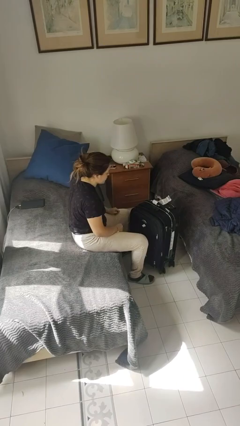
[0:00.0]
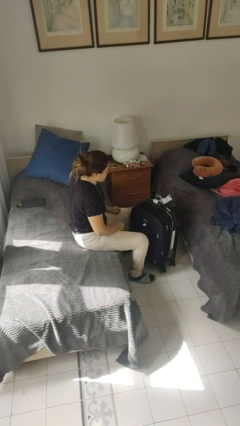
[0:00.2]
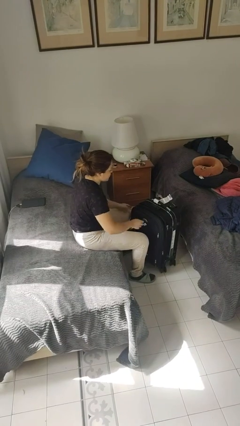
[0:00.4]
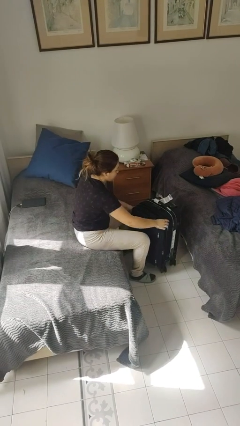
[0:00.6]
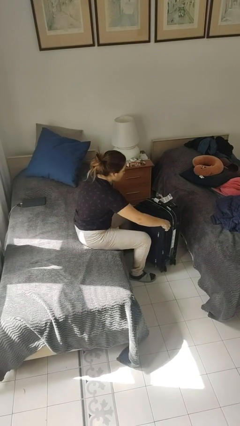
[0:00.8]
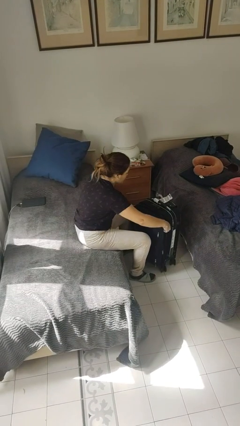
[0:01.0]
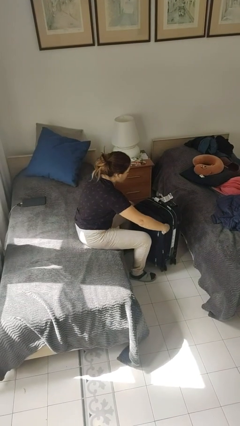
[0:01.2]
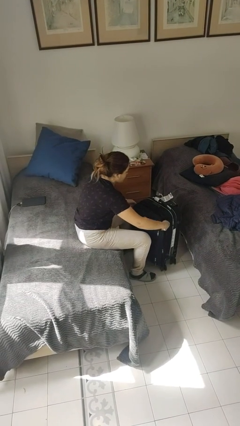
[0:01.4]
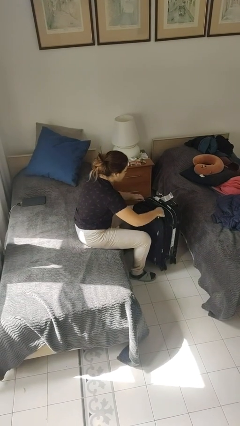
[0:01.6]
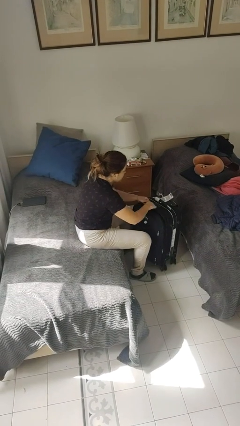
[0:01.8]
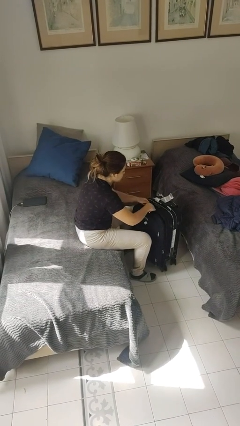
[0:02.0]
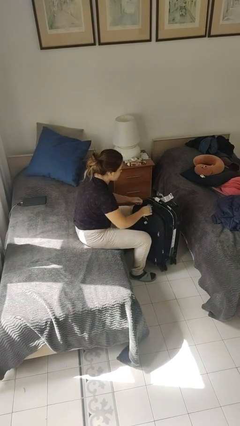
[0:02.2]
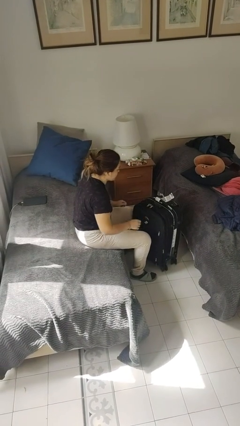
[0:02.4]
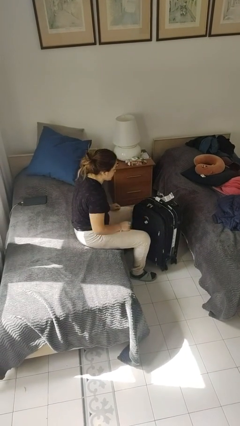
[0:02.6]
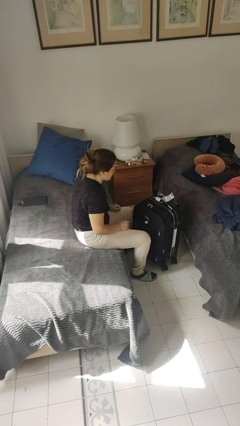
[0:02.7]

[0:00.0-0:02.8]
person closes suitcase

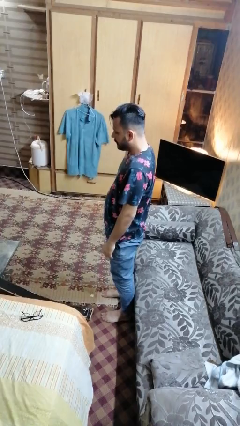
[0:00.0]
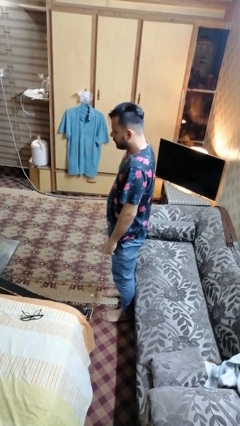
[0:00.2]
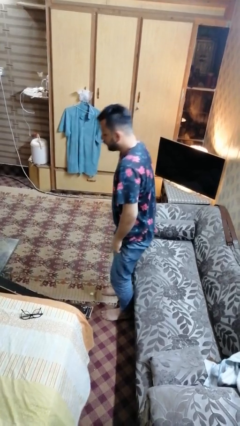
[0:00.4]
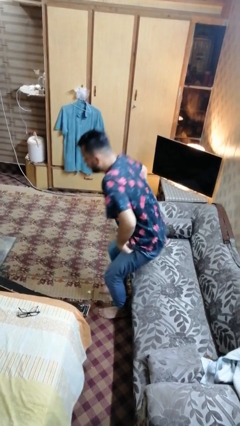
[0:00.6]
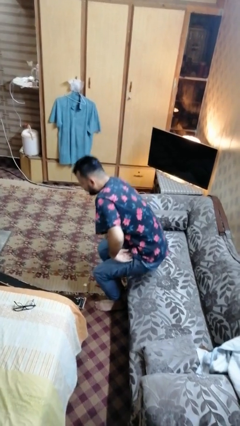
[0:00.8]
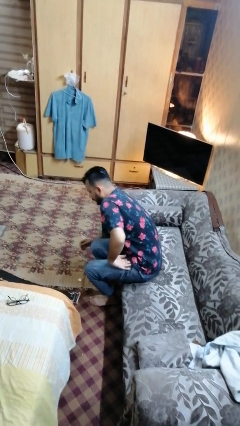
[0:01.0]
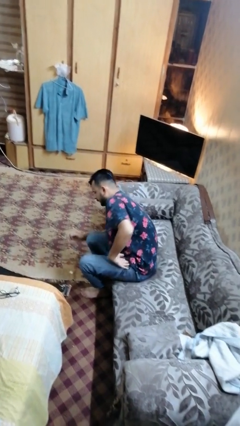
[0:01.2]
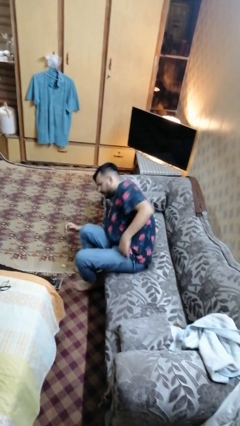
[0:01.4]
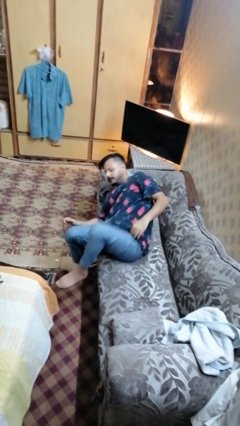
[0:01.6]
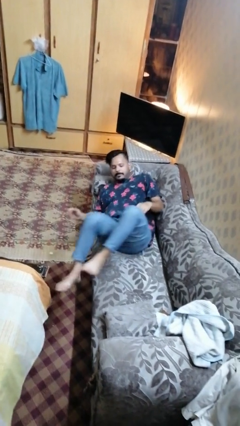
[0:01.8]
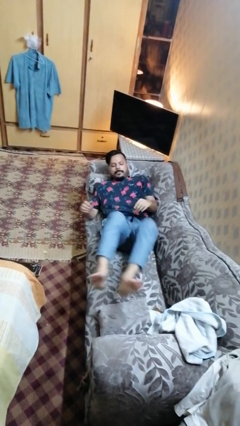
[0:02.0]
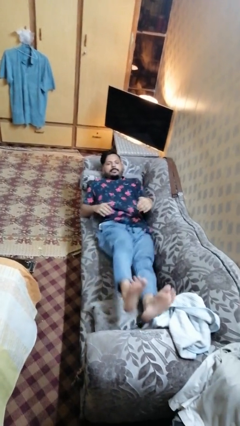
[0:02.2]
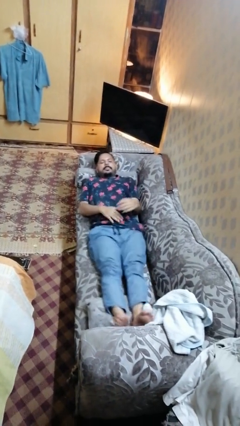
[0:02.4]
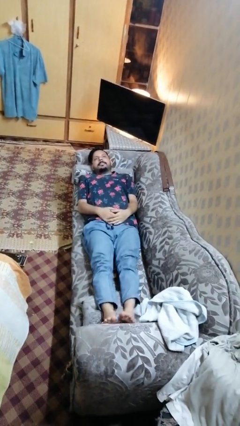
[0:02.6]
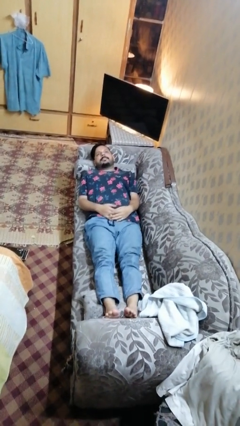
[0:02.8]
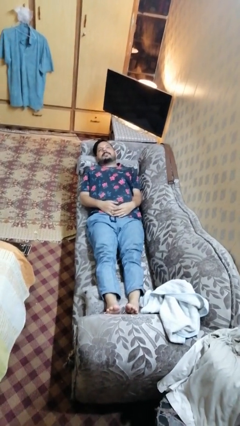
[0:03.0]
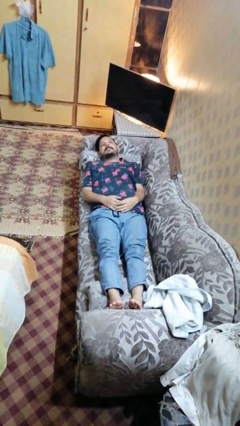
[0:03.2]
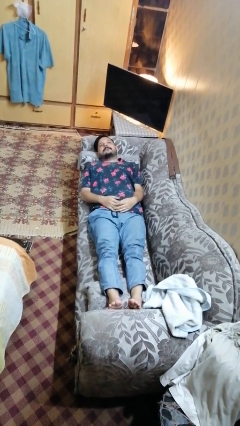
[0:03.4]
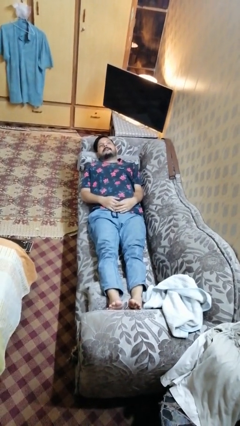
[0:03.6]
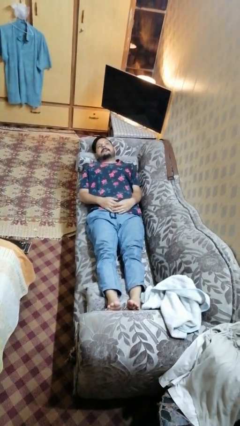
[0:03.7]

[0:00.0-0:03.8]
person lies down on couch

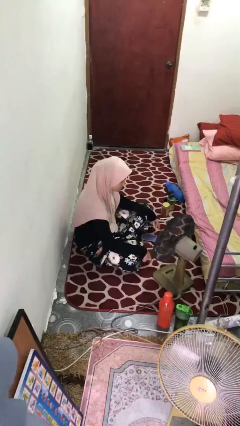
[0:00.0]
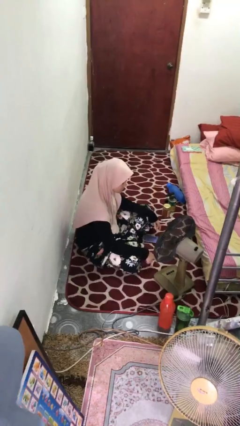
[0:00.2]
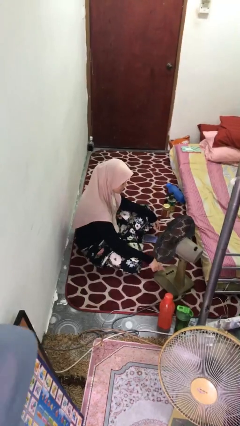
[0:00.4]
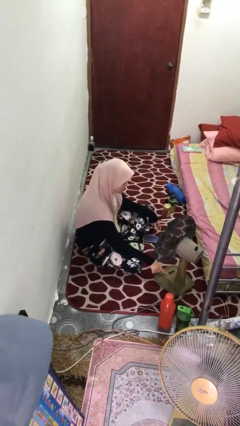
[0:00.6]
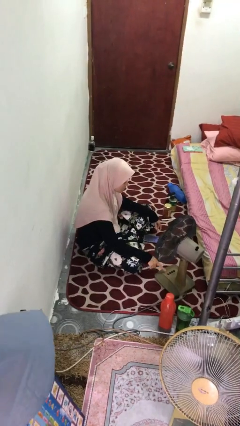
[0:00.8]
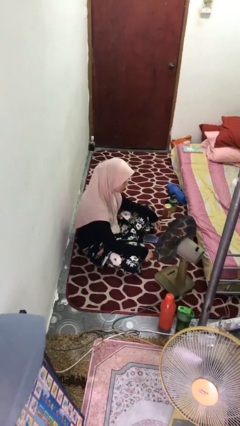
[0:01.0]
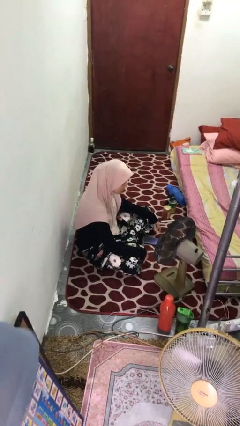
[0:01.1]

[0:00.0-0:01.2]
person turns off fan

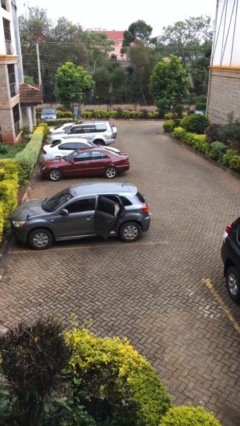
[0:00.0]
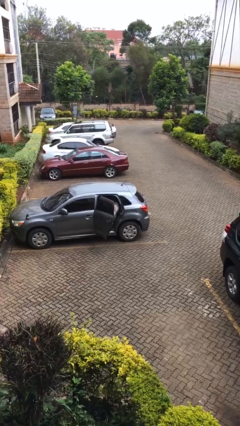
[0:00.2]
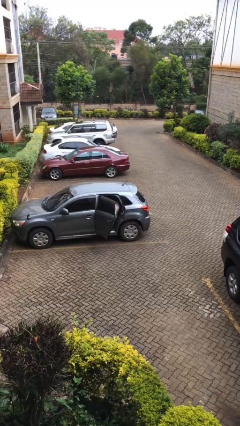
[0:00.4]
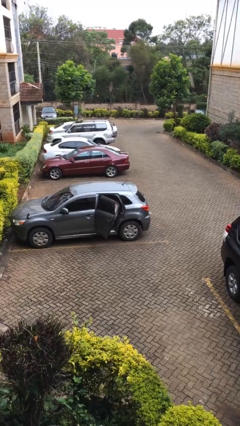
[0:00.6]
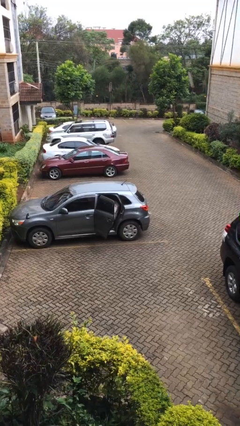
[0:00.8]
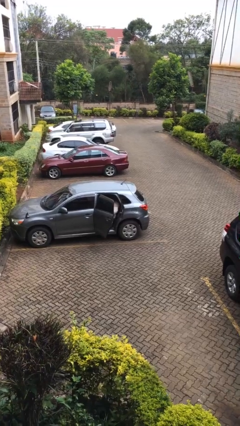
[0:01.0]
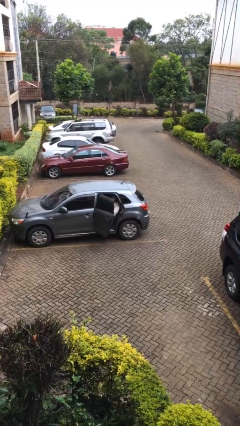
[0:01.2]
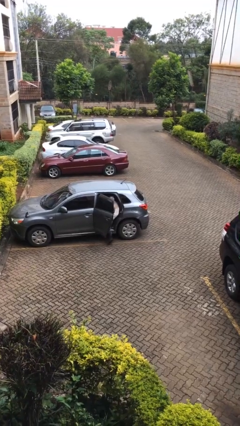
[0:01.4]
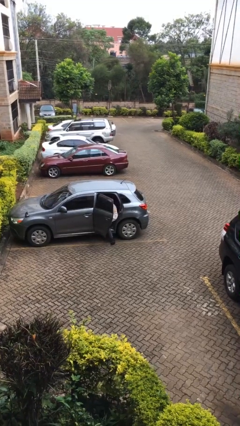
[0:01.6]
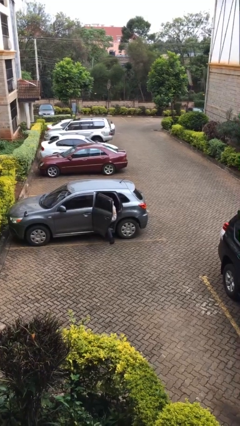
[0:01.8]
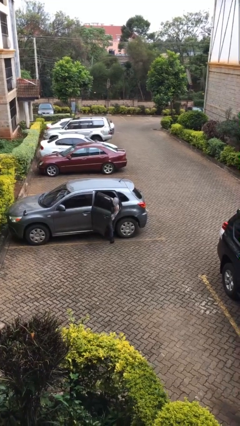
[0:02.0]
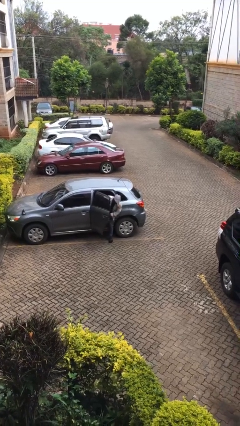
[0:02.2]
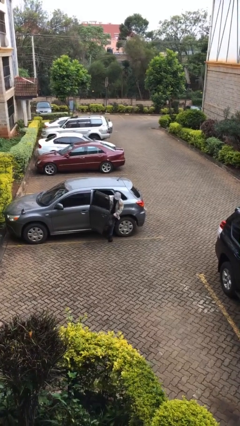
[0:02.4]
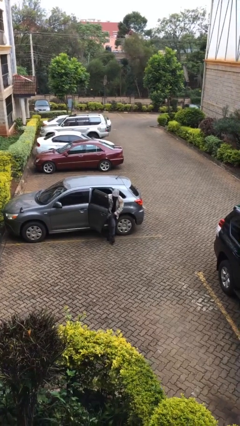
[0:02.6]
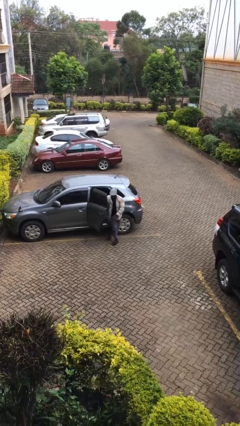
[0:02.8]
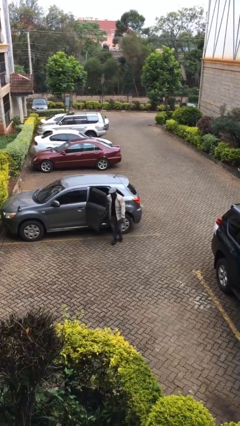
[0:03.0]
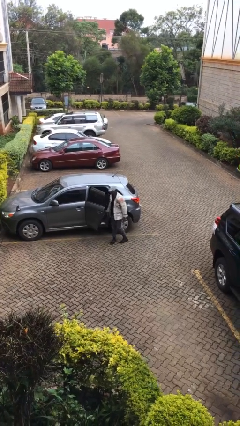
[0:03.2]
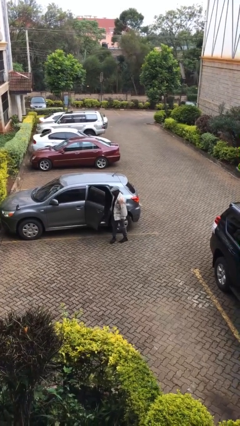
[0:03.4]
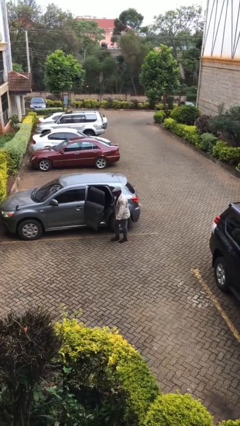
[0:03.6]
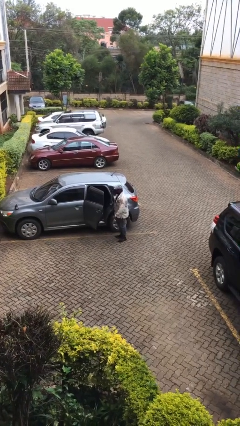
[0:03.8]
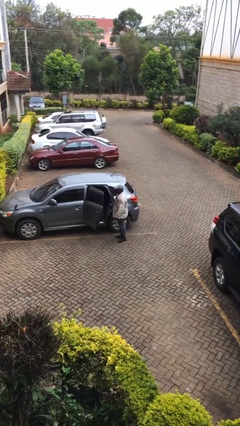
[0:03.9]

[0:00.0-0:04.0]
person exits car

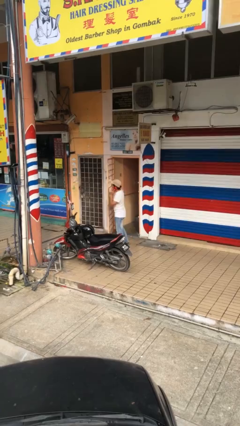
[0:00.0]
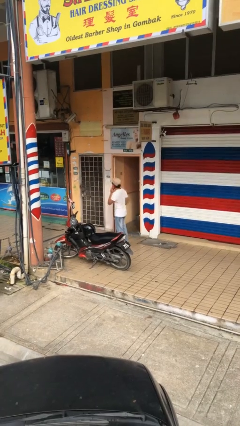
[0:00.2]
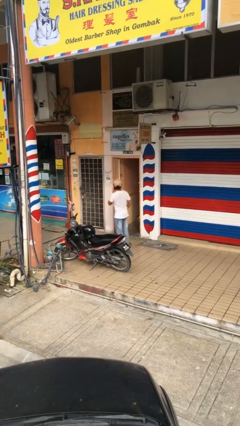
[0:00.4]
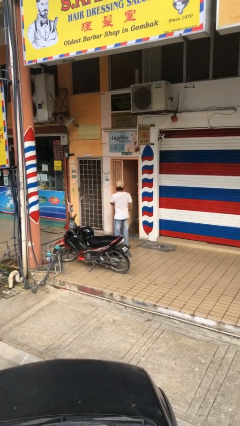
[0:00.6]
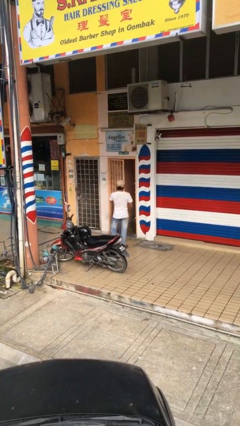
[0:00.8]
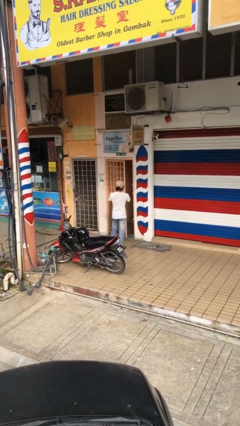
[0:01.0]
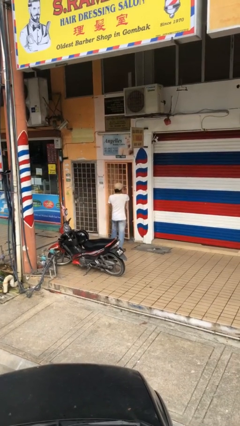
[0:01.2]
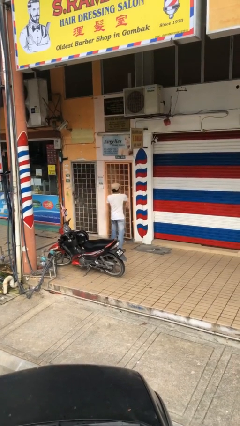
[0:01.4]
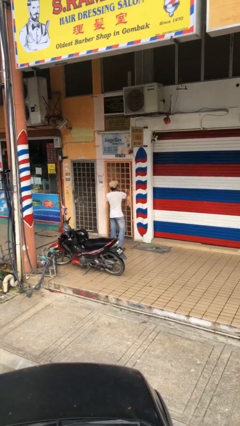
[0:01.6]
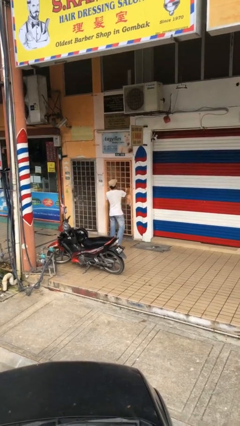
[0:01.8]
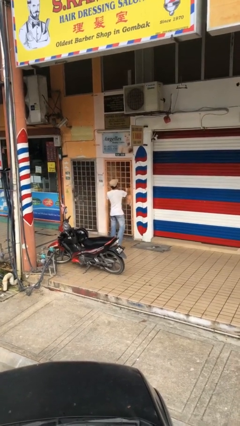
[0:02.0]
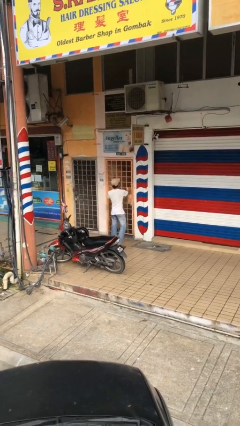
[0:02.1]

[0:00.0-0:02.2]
person closes facility door

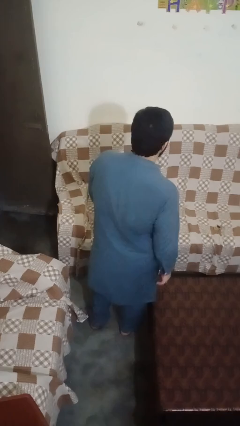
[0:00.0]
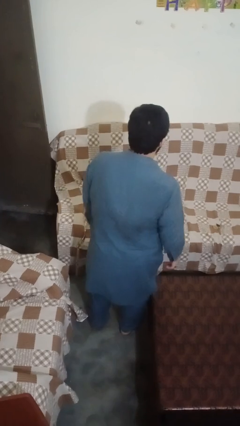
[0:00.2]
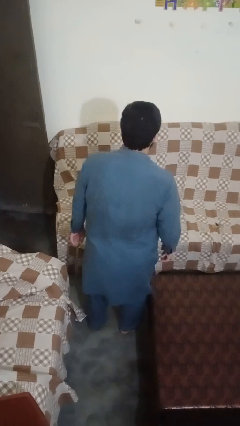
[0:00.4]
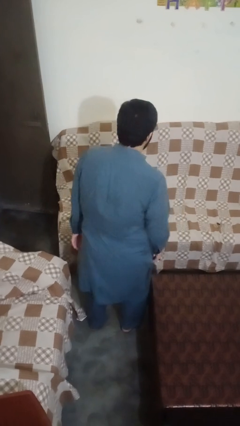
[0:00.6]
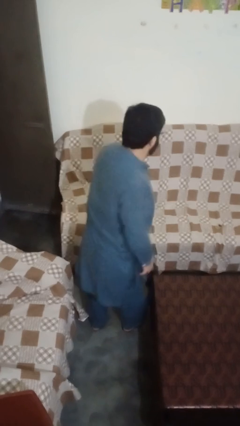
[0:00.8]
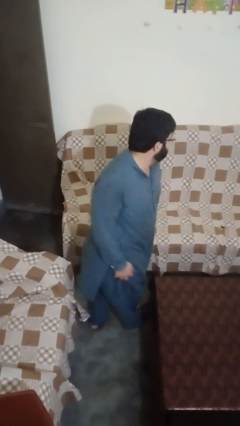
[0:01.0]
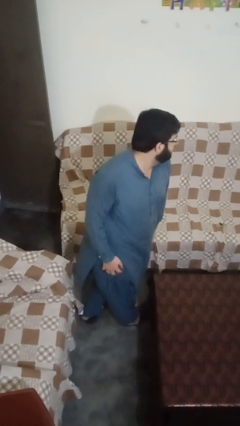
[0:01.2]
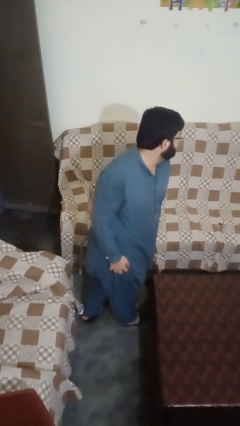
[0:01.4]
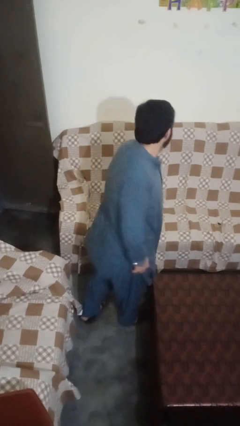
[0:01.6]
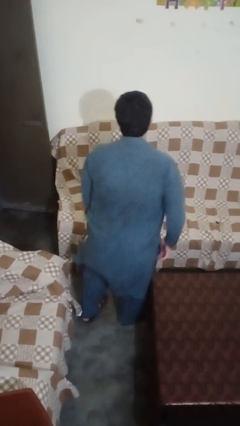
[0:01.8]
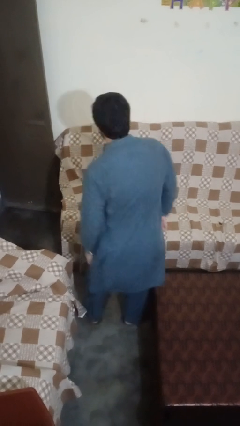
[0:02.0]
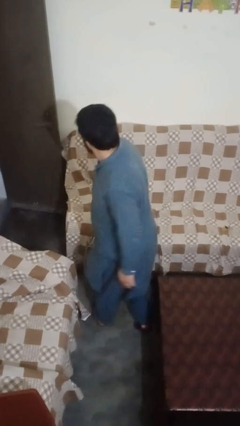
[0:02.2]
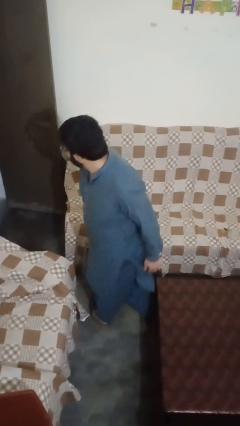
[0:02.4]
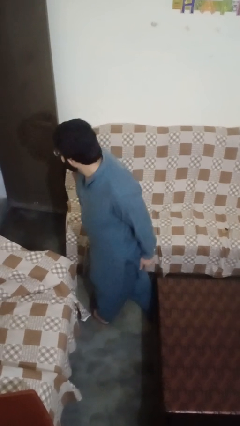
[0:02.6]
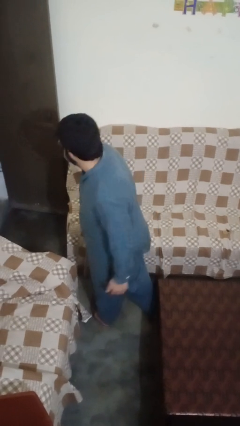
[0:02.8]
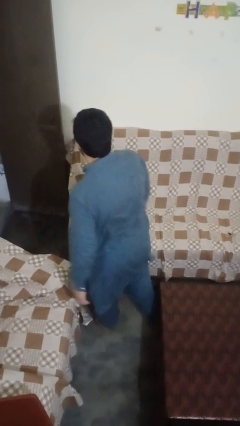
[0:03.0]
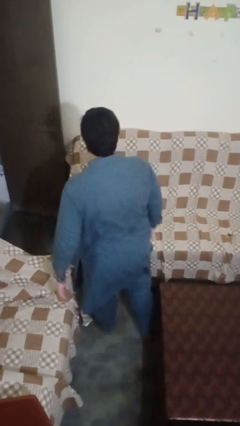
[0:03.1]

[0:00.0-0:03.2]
person twirls
